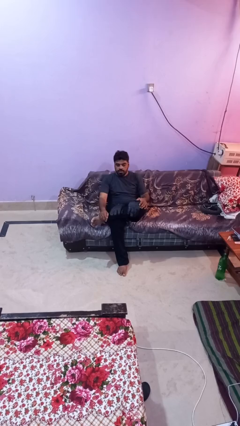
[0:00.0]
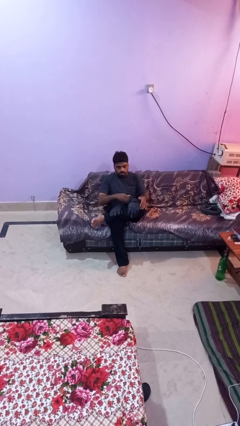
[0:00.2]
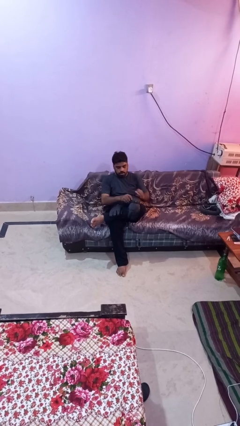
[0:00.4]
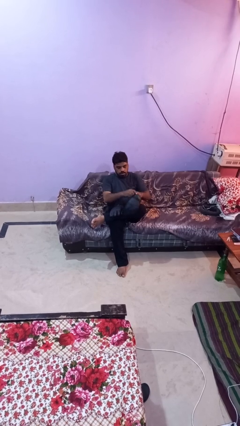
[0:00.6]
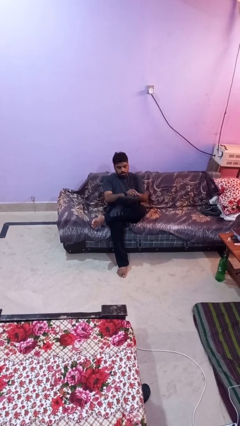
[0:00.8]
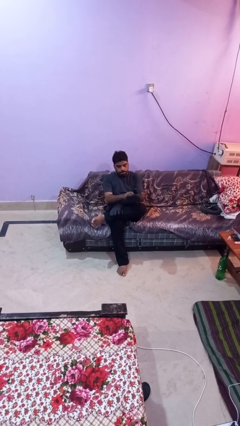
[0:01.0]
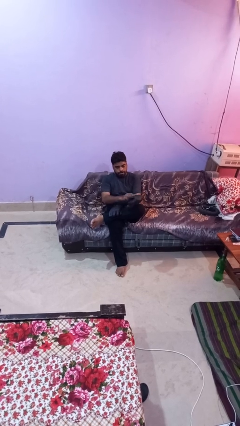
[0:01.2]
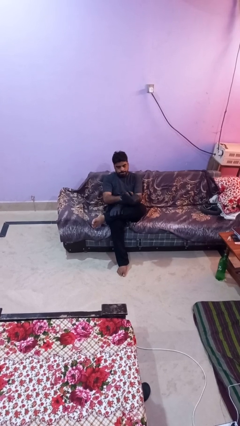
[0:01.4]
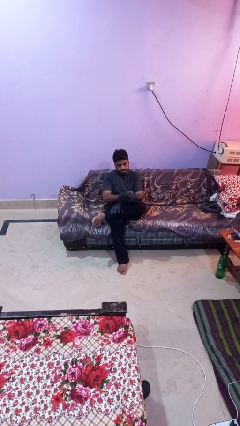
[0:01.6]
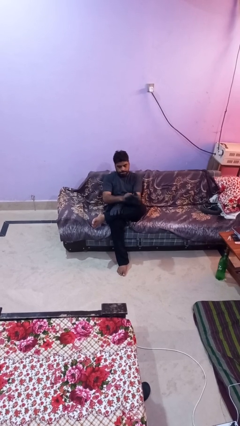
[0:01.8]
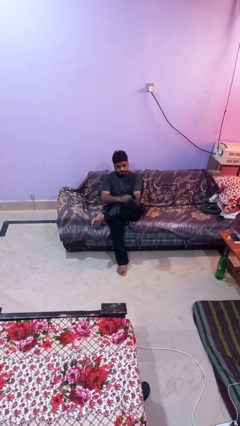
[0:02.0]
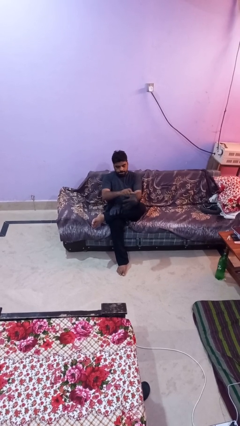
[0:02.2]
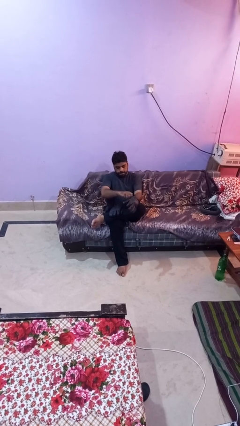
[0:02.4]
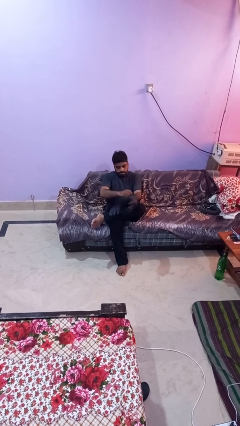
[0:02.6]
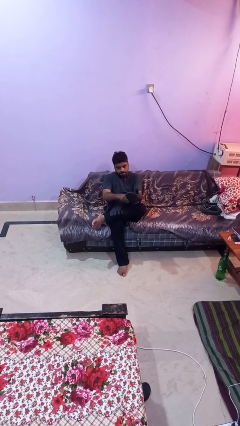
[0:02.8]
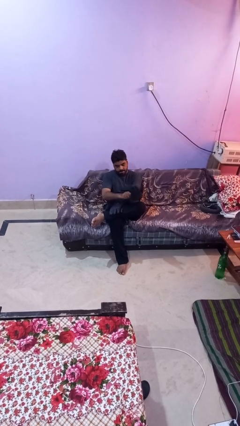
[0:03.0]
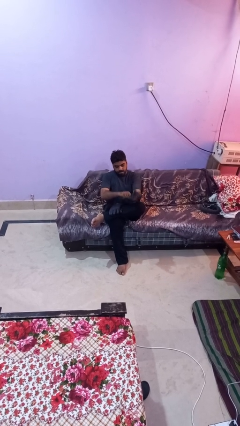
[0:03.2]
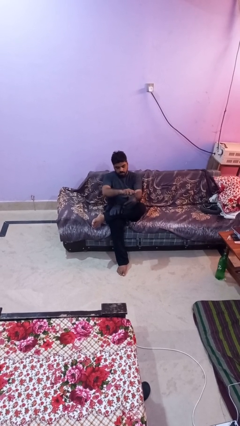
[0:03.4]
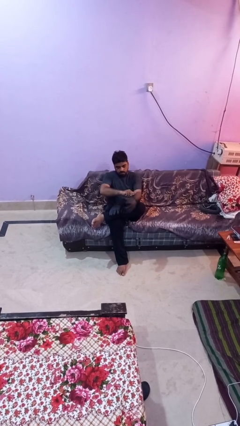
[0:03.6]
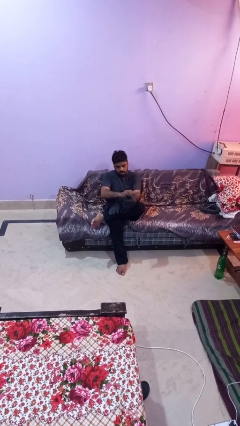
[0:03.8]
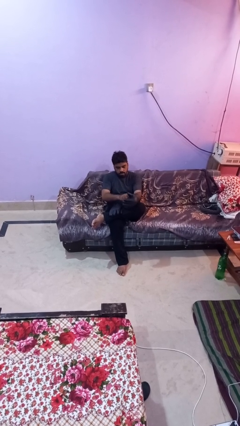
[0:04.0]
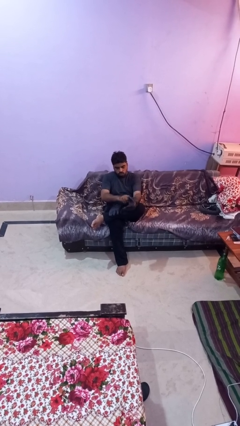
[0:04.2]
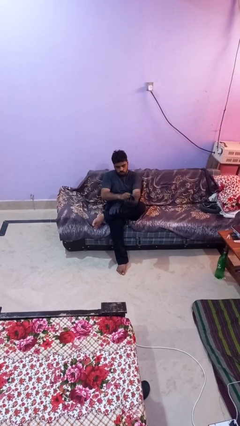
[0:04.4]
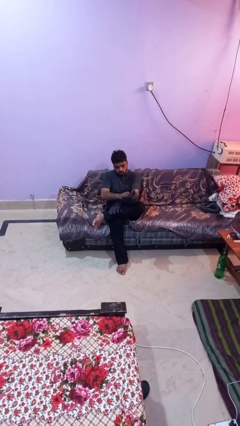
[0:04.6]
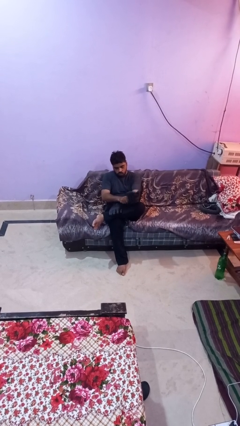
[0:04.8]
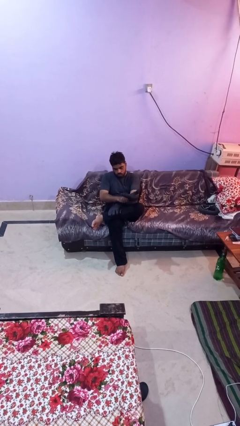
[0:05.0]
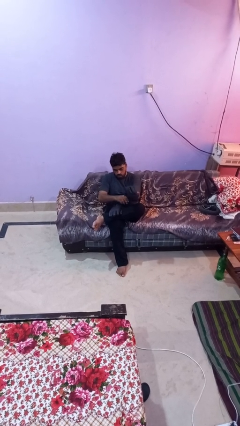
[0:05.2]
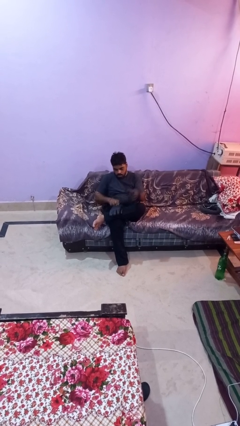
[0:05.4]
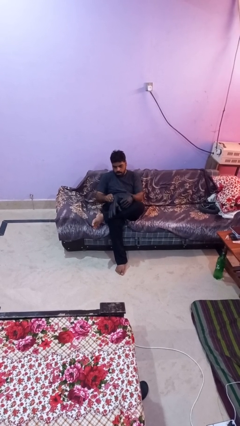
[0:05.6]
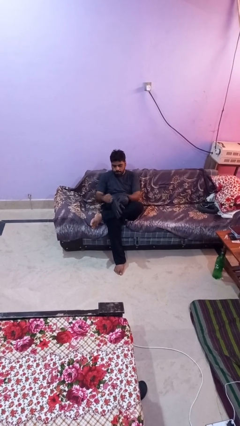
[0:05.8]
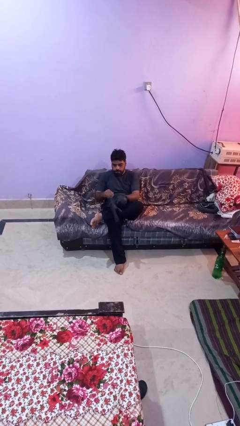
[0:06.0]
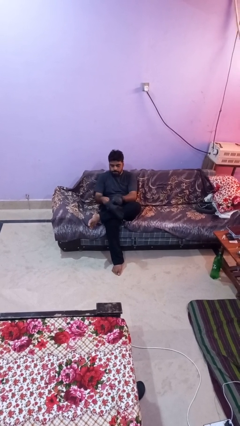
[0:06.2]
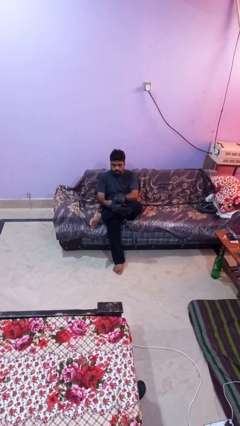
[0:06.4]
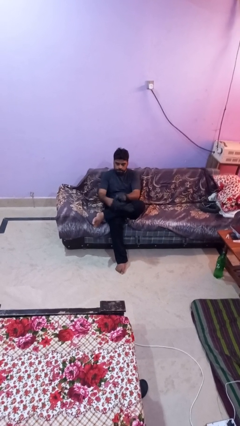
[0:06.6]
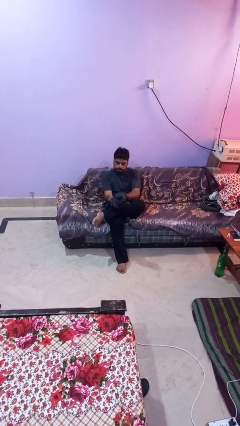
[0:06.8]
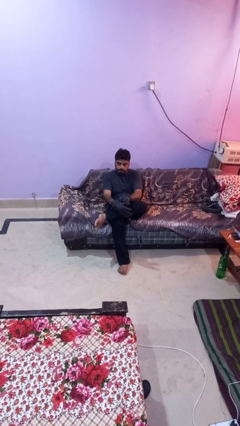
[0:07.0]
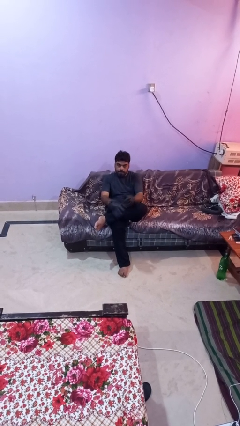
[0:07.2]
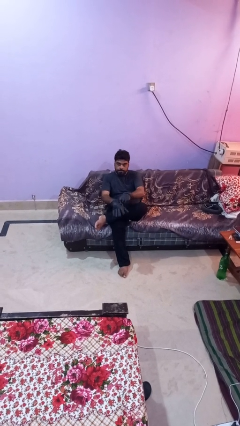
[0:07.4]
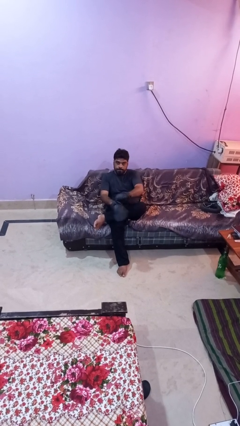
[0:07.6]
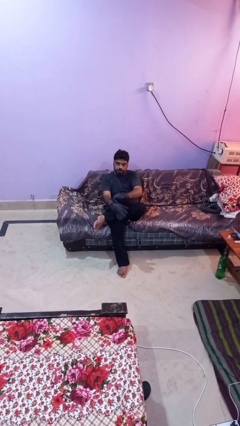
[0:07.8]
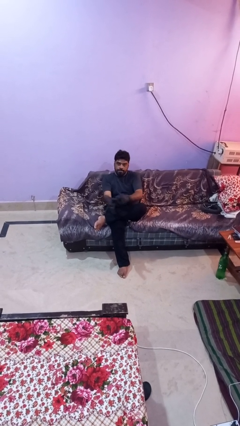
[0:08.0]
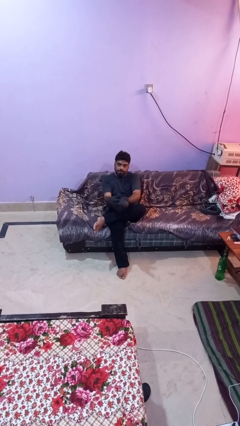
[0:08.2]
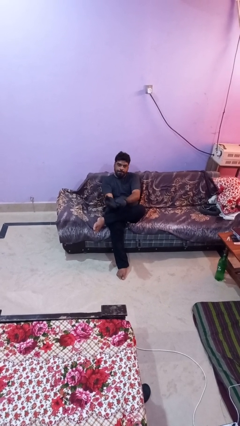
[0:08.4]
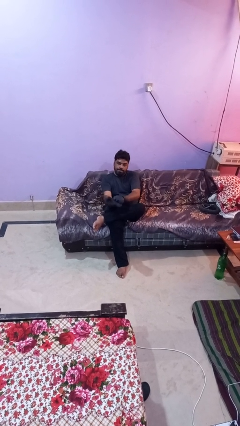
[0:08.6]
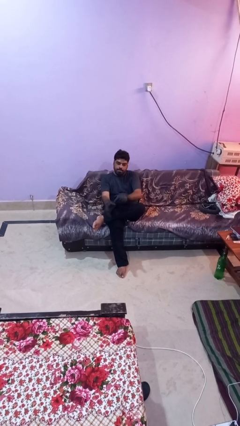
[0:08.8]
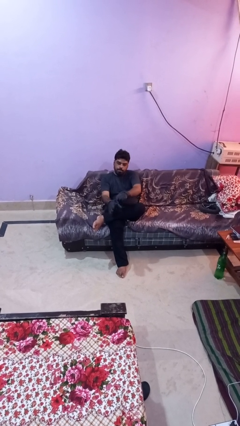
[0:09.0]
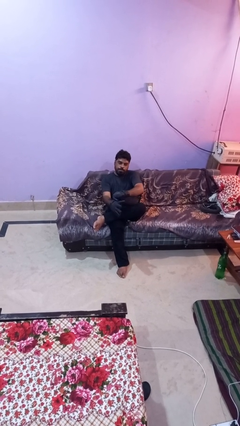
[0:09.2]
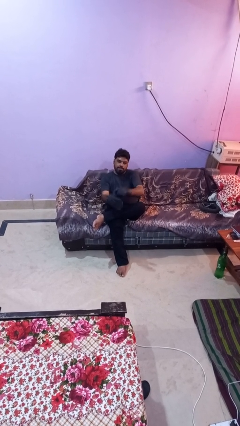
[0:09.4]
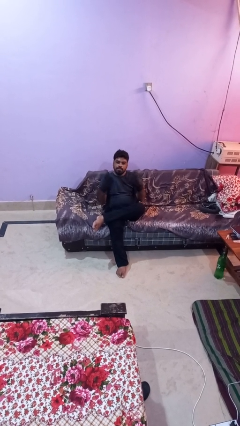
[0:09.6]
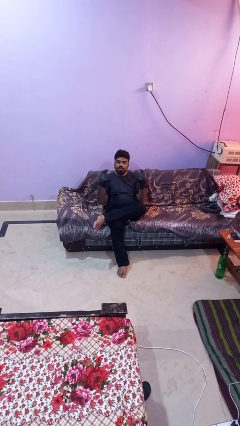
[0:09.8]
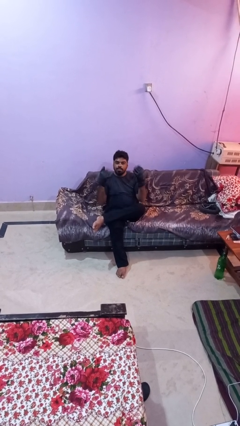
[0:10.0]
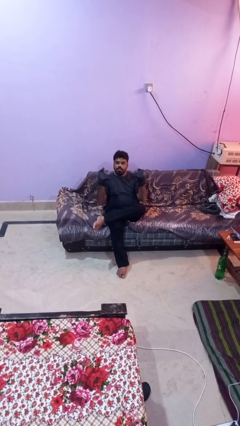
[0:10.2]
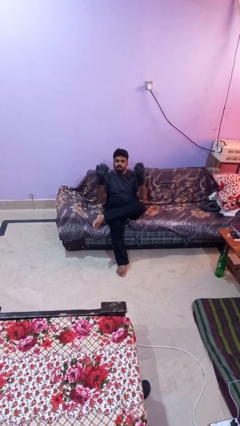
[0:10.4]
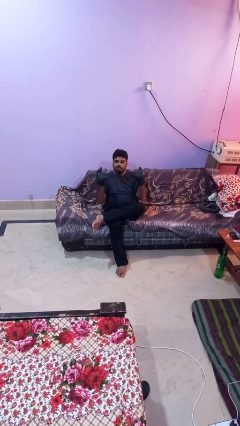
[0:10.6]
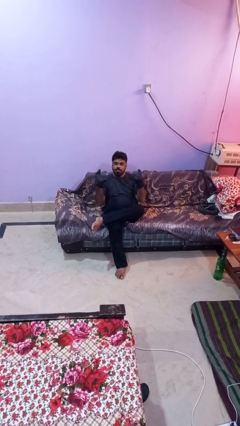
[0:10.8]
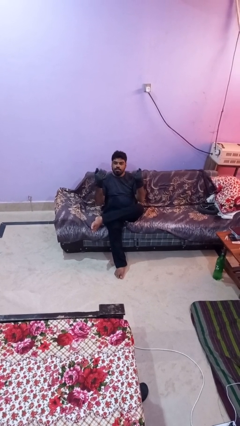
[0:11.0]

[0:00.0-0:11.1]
person puts on gloves

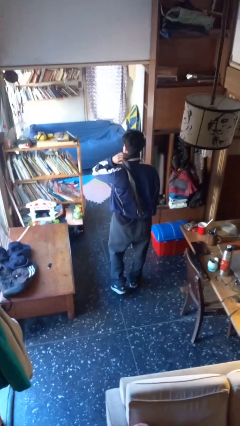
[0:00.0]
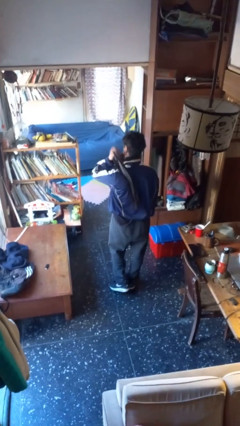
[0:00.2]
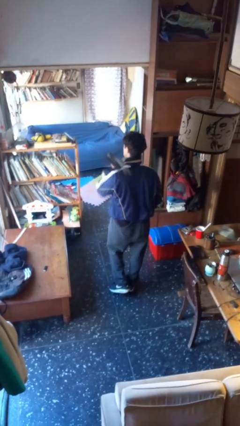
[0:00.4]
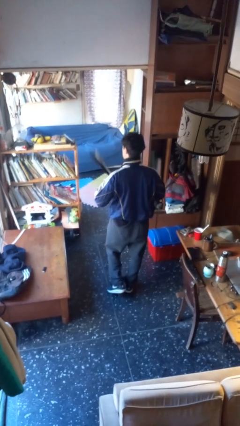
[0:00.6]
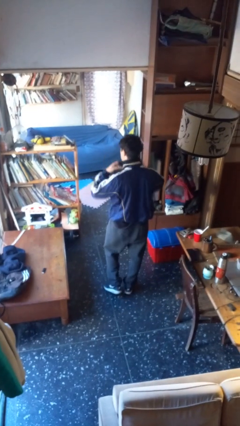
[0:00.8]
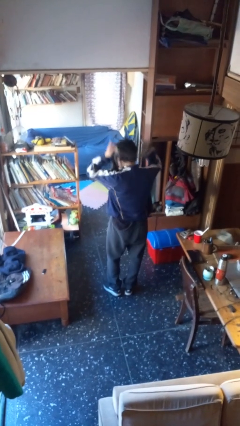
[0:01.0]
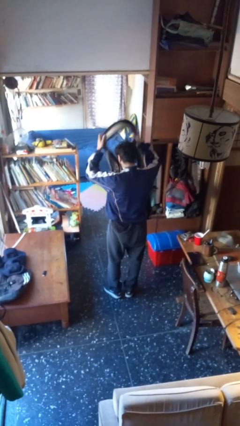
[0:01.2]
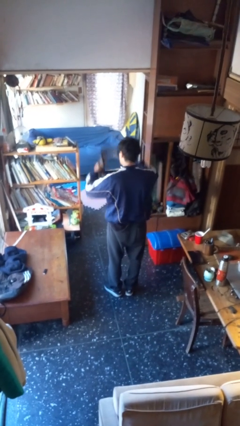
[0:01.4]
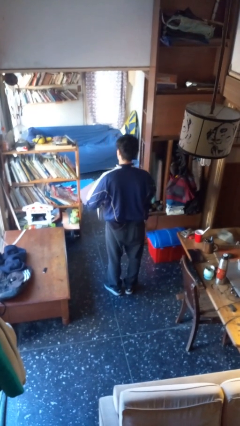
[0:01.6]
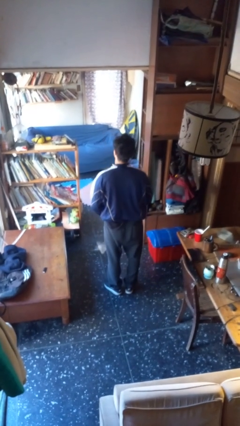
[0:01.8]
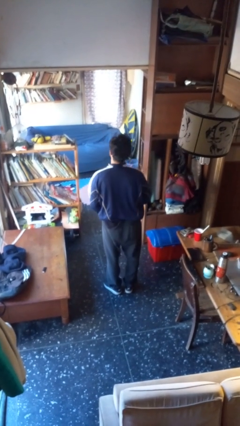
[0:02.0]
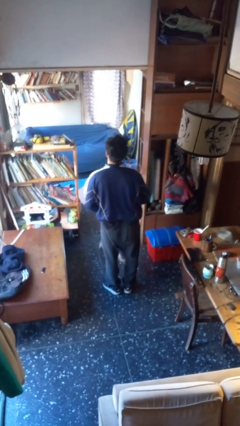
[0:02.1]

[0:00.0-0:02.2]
person takes off scarf

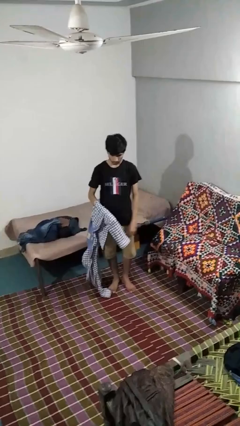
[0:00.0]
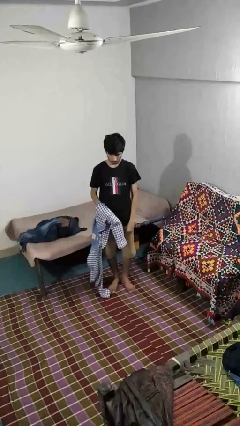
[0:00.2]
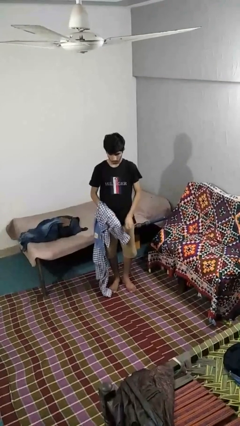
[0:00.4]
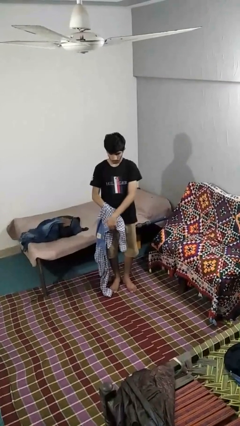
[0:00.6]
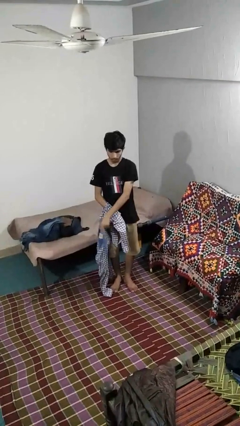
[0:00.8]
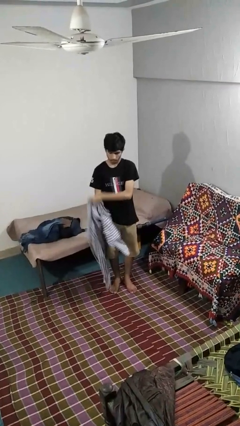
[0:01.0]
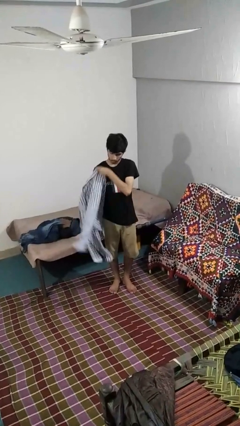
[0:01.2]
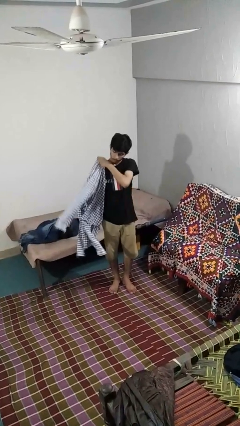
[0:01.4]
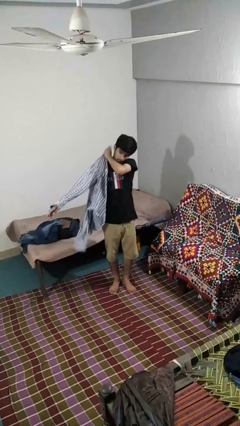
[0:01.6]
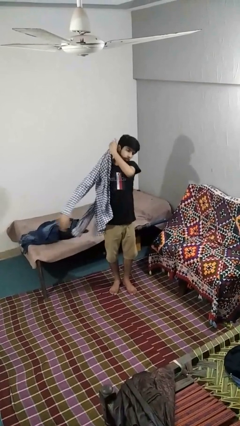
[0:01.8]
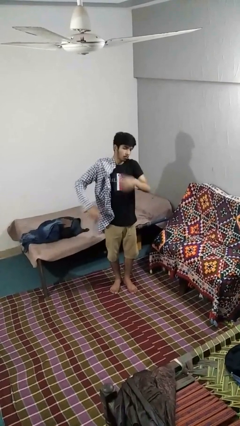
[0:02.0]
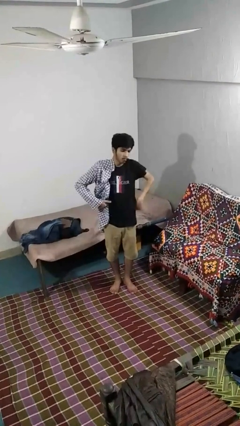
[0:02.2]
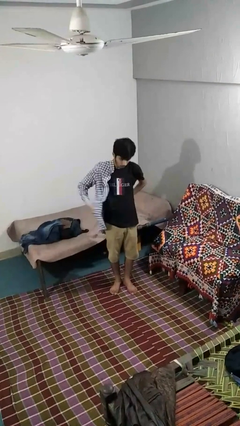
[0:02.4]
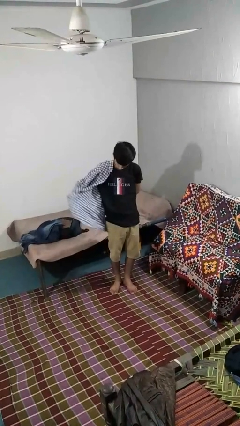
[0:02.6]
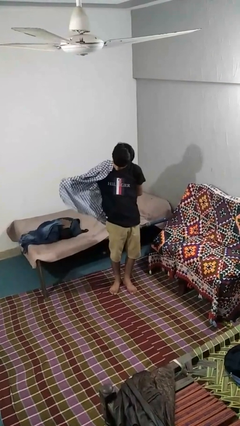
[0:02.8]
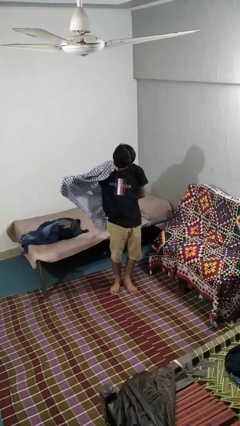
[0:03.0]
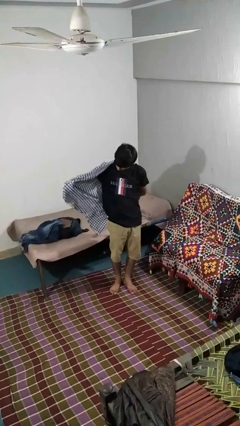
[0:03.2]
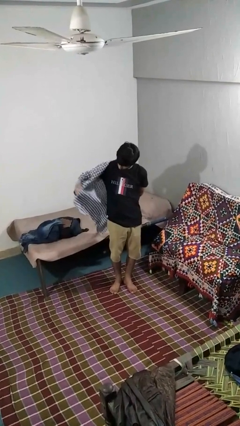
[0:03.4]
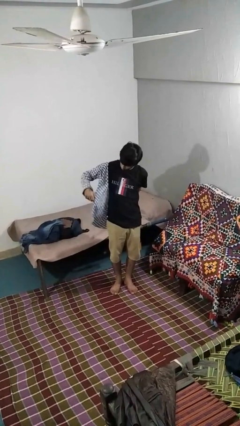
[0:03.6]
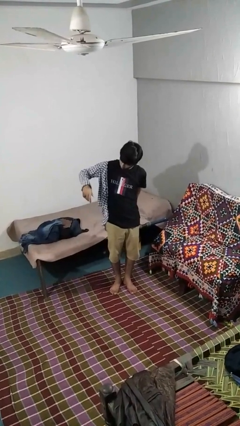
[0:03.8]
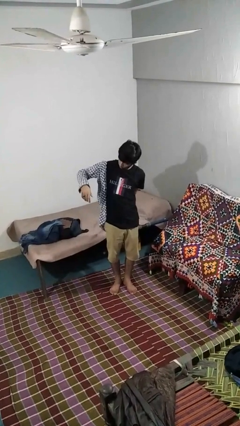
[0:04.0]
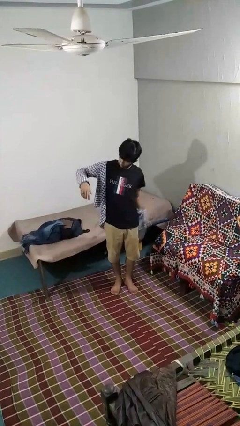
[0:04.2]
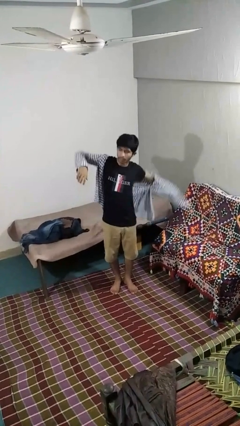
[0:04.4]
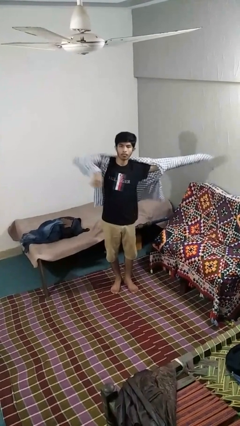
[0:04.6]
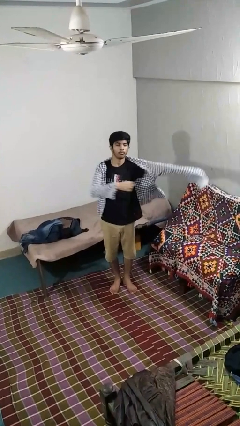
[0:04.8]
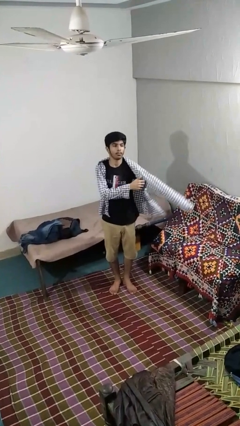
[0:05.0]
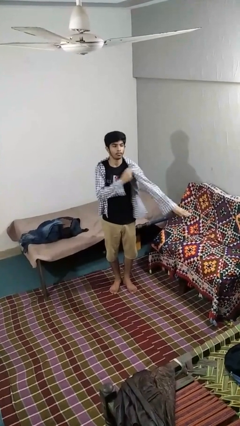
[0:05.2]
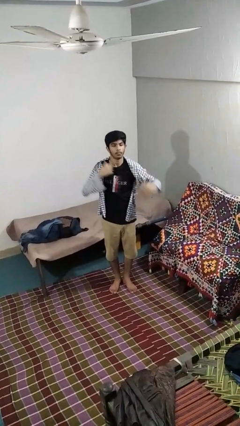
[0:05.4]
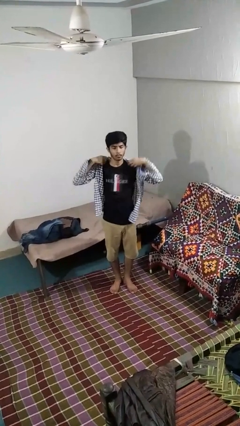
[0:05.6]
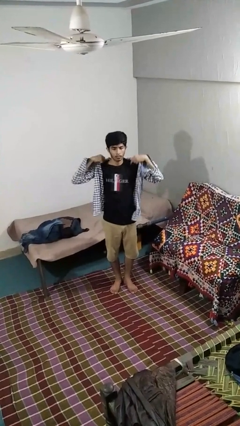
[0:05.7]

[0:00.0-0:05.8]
person puts on shirt
